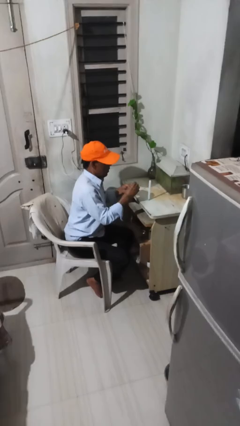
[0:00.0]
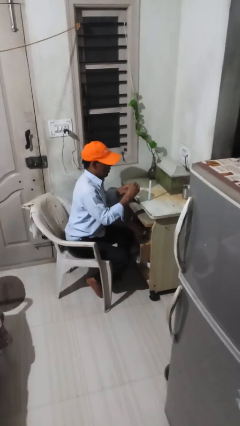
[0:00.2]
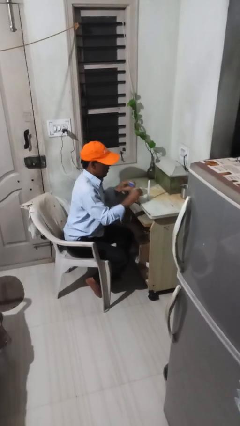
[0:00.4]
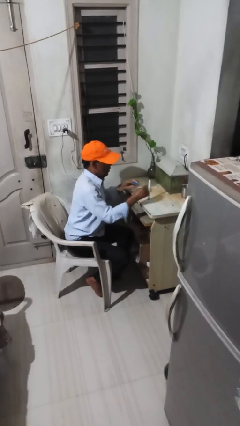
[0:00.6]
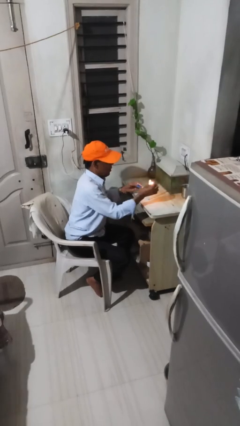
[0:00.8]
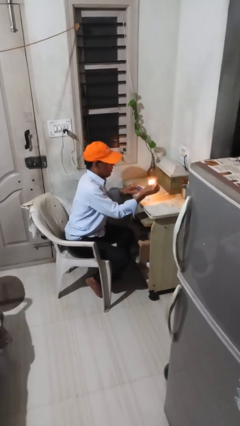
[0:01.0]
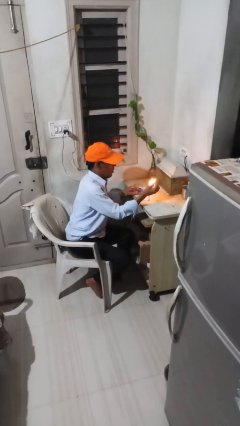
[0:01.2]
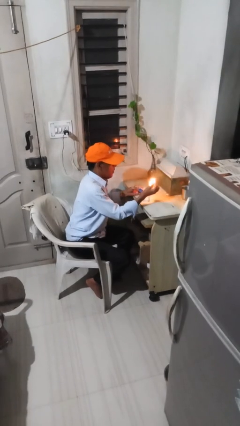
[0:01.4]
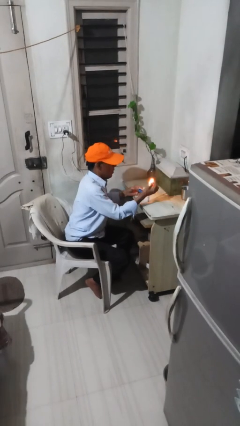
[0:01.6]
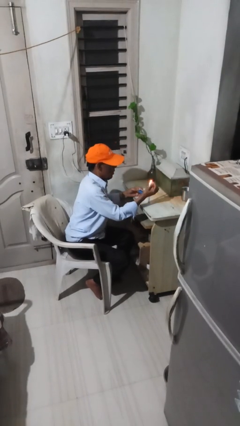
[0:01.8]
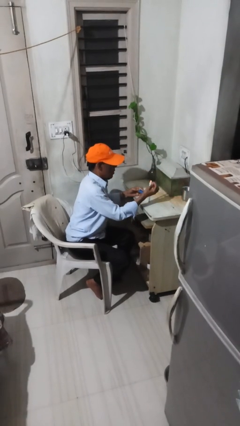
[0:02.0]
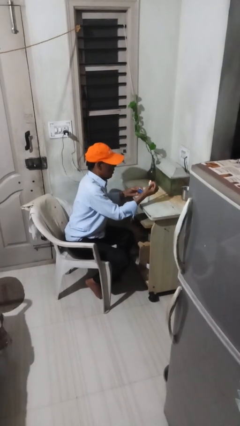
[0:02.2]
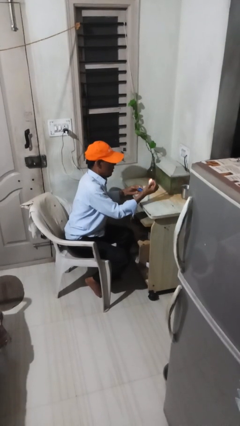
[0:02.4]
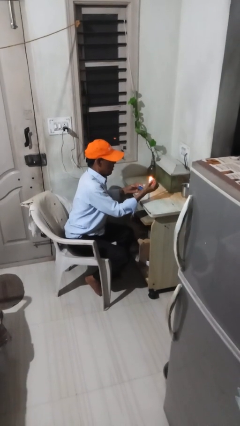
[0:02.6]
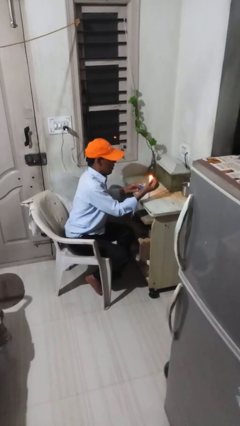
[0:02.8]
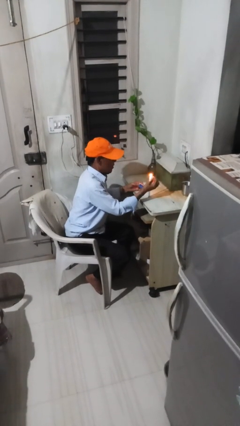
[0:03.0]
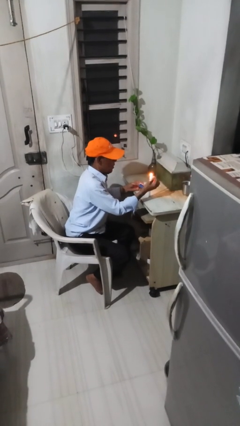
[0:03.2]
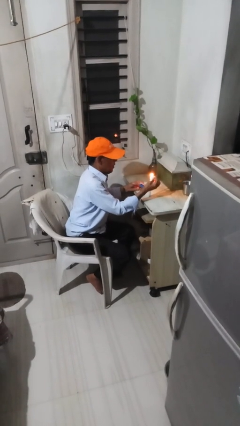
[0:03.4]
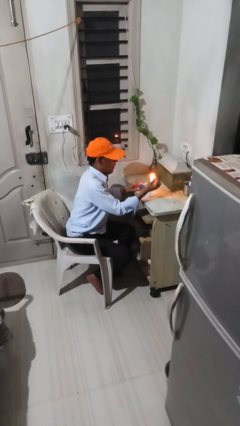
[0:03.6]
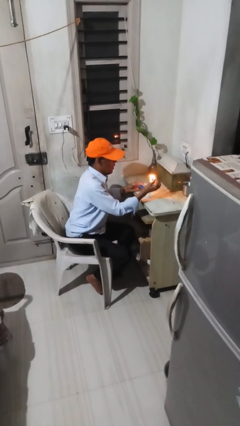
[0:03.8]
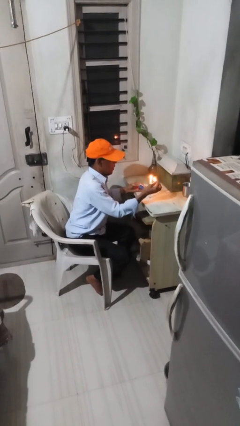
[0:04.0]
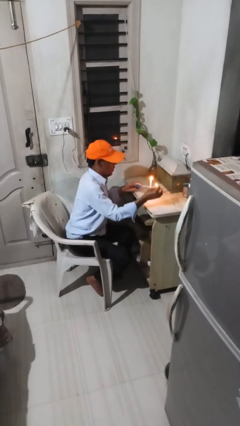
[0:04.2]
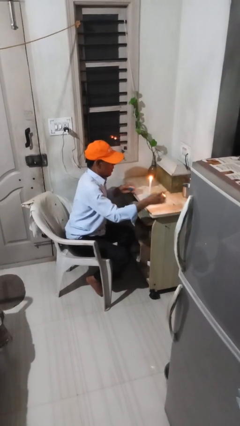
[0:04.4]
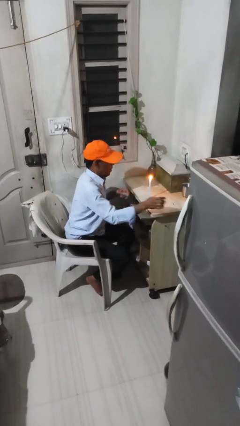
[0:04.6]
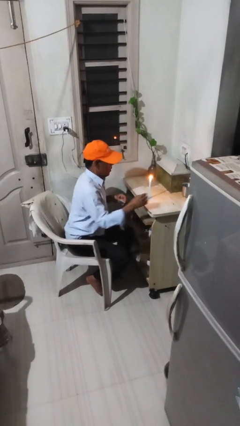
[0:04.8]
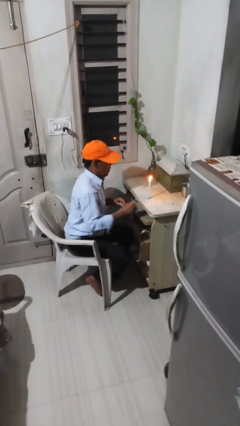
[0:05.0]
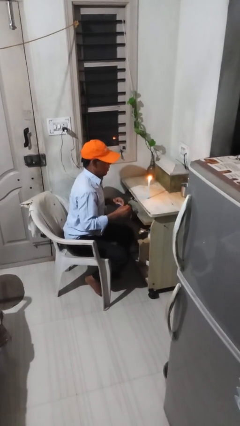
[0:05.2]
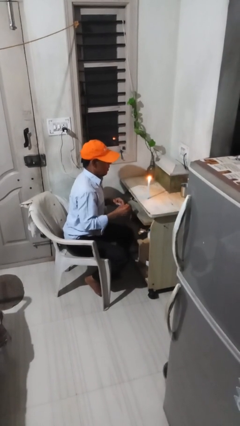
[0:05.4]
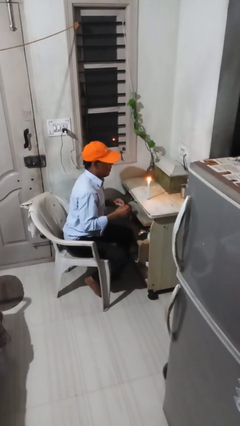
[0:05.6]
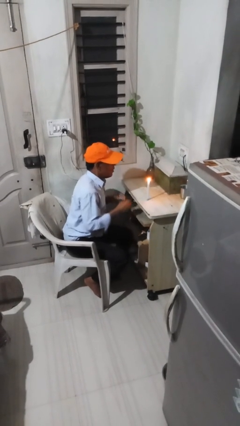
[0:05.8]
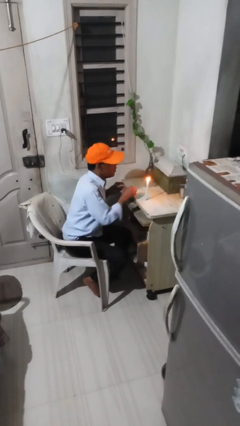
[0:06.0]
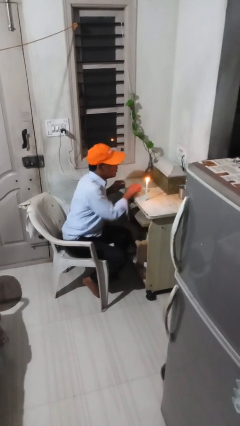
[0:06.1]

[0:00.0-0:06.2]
person lights candle

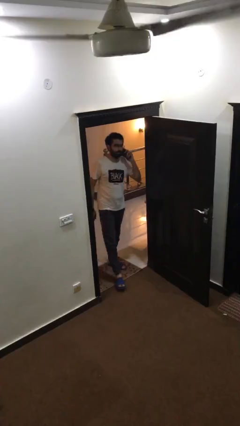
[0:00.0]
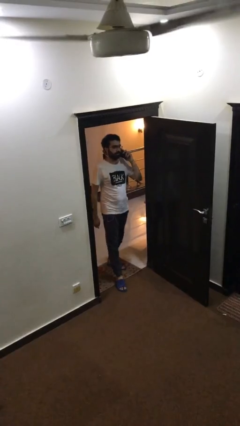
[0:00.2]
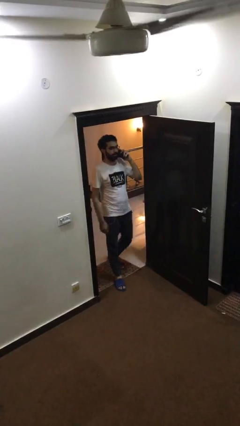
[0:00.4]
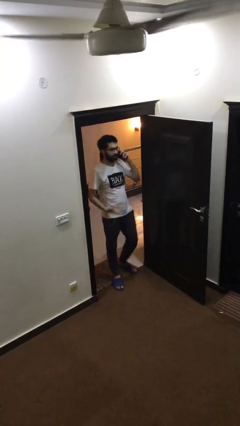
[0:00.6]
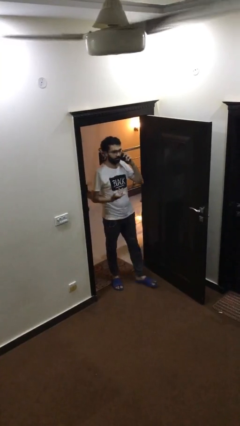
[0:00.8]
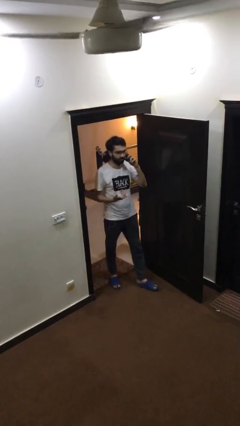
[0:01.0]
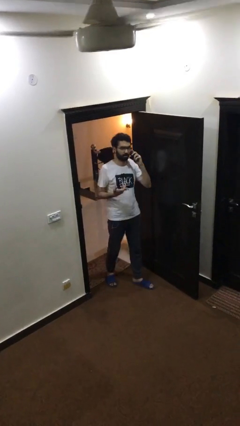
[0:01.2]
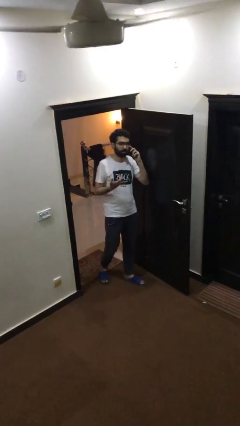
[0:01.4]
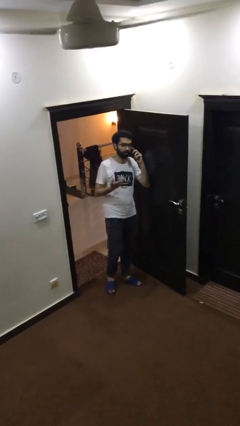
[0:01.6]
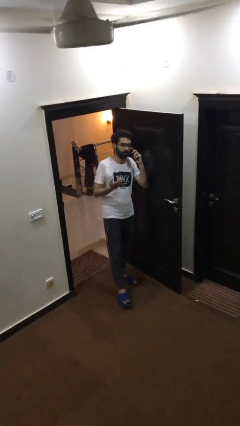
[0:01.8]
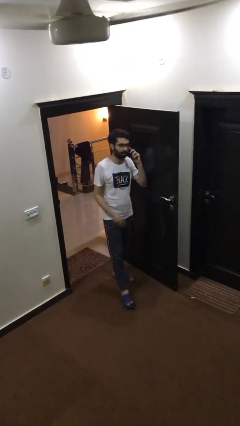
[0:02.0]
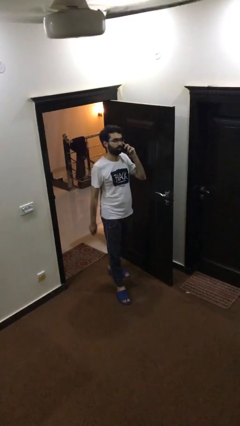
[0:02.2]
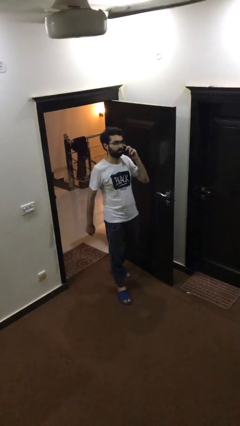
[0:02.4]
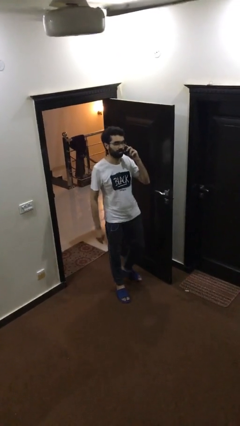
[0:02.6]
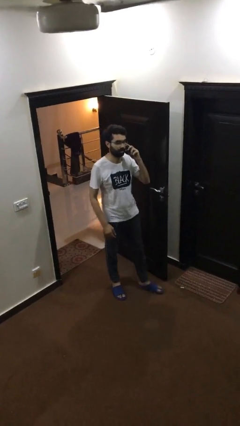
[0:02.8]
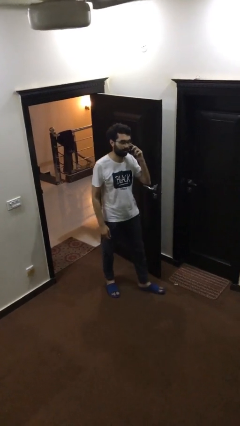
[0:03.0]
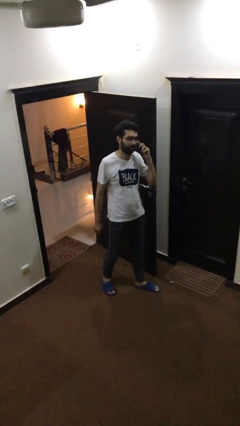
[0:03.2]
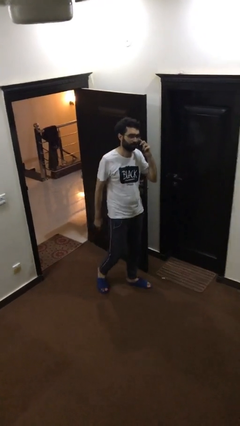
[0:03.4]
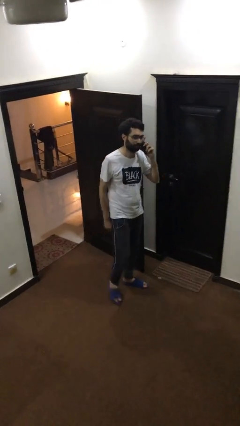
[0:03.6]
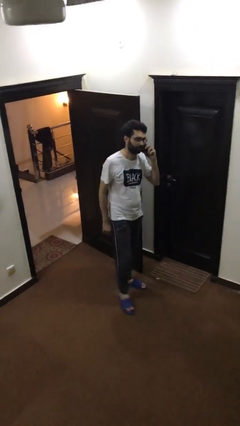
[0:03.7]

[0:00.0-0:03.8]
person enters scene through structure

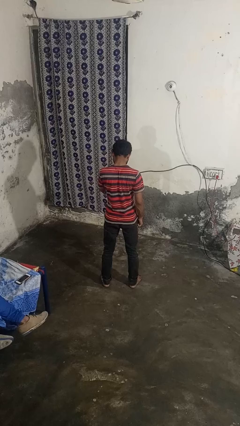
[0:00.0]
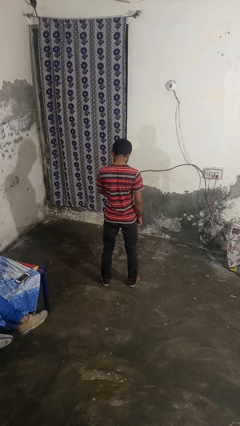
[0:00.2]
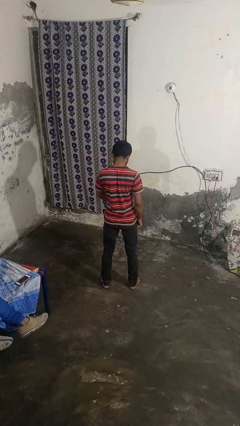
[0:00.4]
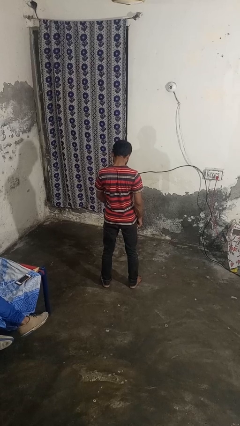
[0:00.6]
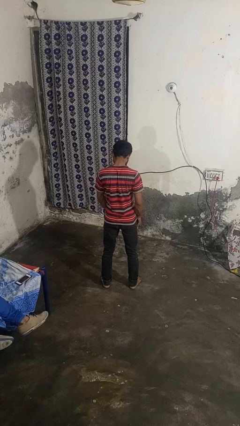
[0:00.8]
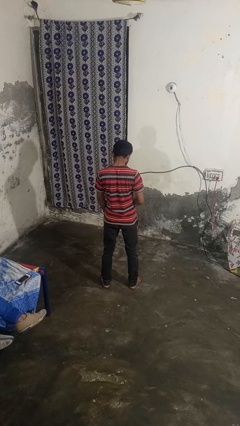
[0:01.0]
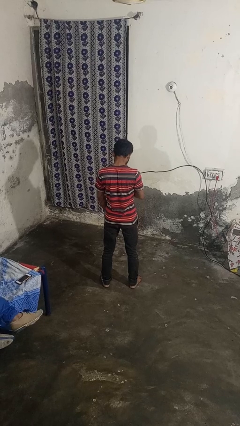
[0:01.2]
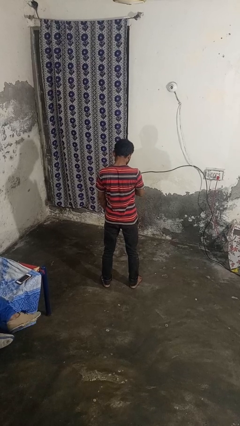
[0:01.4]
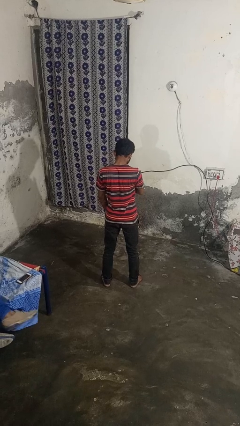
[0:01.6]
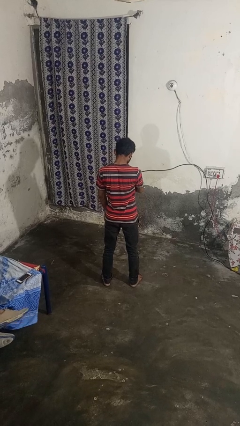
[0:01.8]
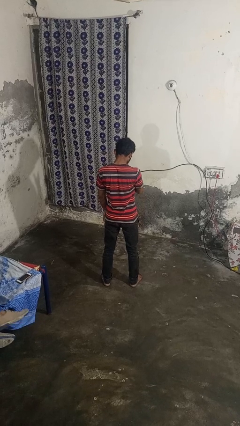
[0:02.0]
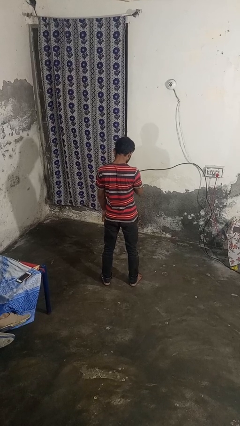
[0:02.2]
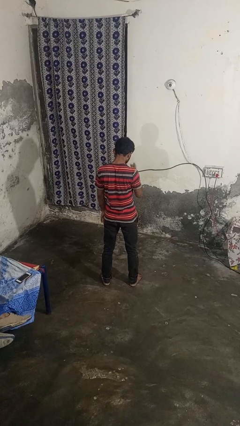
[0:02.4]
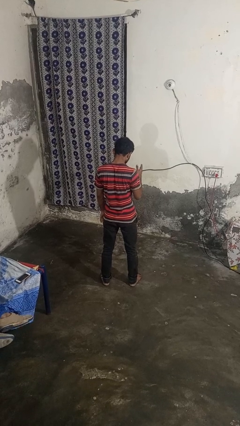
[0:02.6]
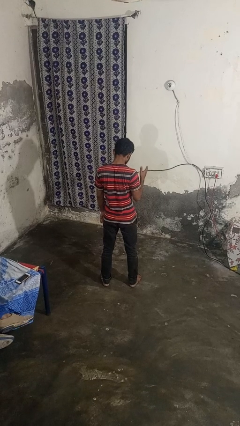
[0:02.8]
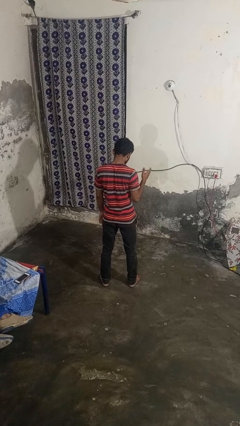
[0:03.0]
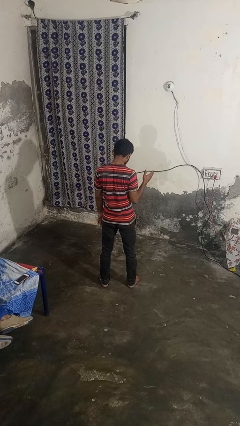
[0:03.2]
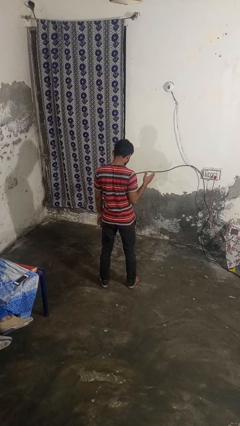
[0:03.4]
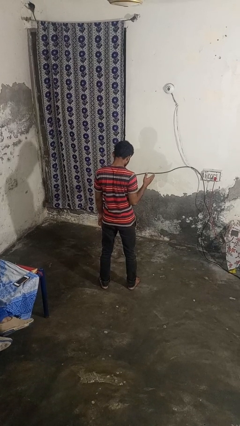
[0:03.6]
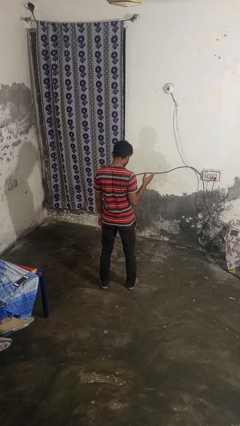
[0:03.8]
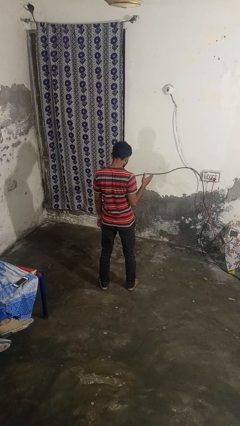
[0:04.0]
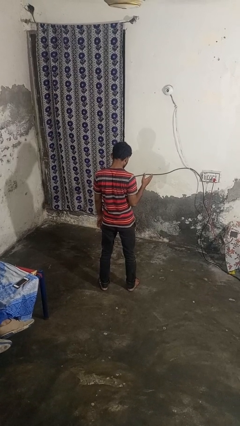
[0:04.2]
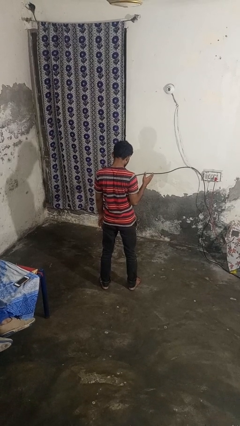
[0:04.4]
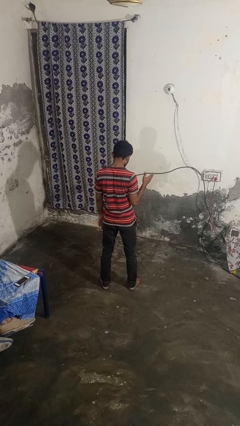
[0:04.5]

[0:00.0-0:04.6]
person gestures swipe right

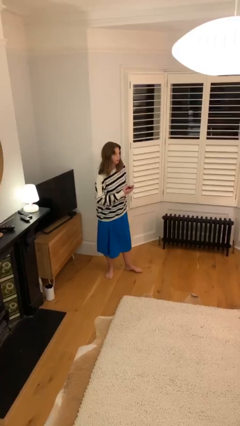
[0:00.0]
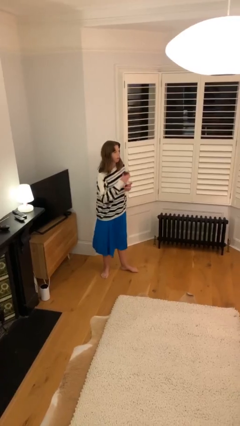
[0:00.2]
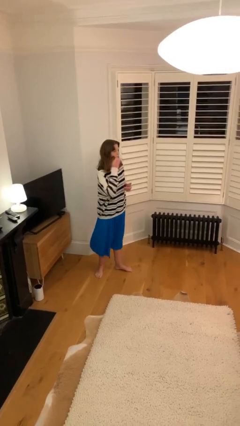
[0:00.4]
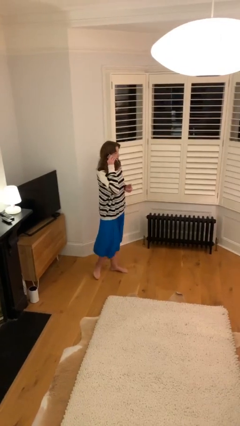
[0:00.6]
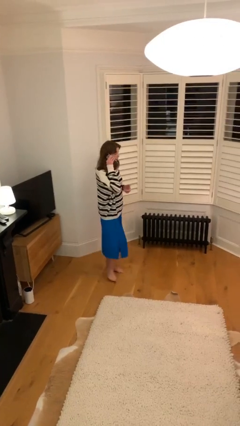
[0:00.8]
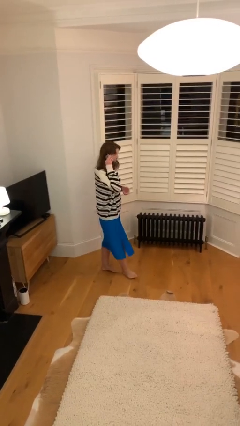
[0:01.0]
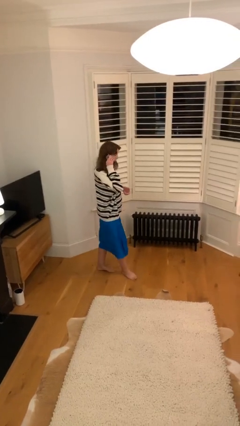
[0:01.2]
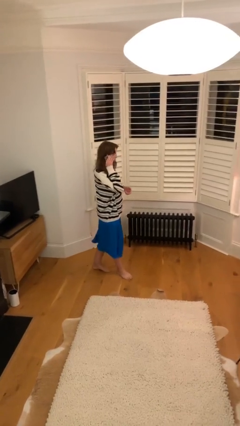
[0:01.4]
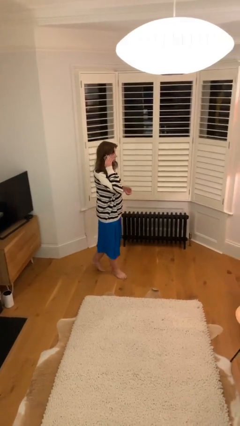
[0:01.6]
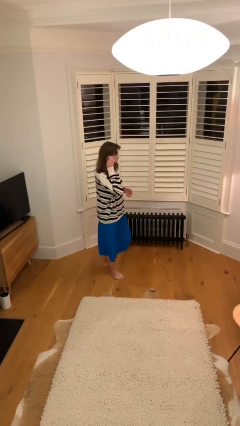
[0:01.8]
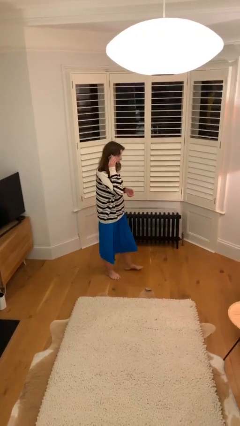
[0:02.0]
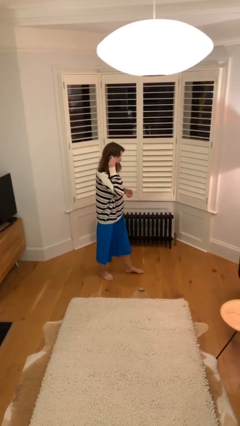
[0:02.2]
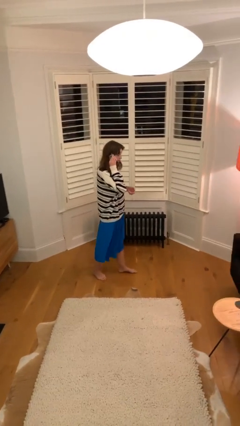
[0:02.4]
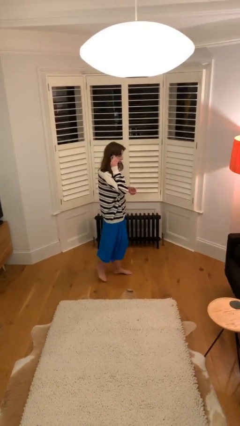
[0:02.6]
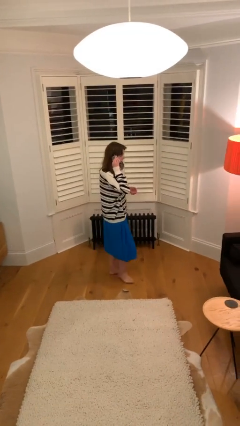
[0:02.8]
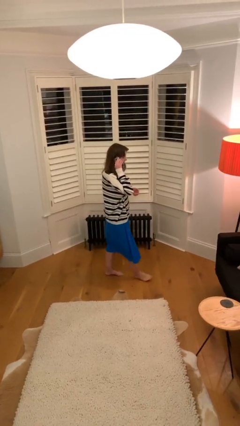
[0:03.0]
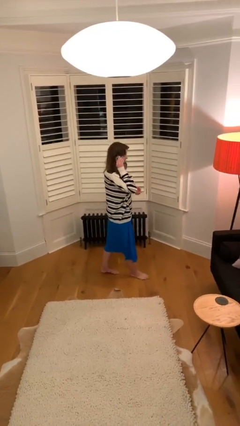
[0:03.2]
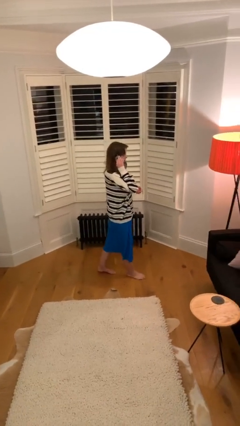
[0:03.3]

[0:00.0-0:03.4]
person talks on phone
